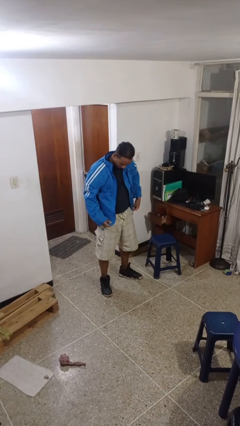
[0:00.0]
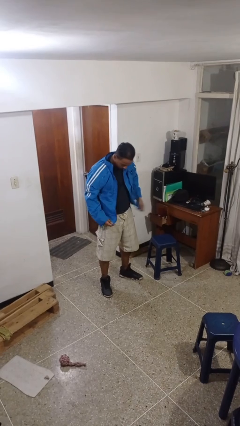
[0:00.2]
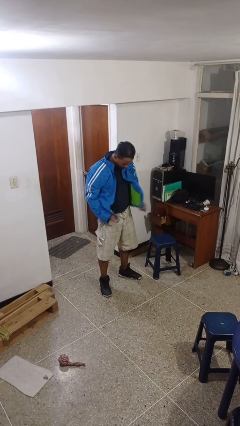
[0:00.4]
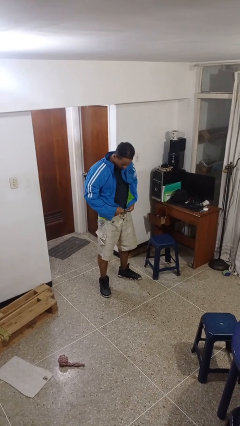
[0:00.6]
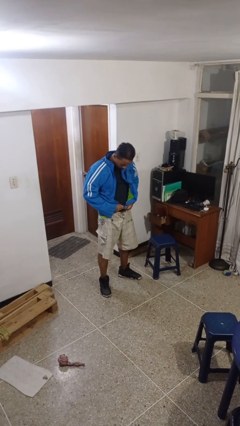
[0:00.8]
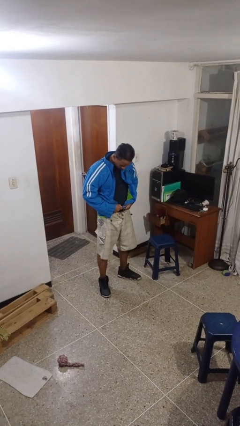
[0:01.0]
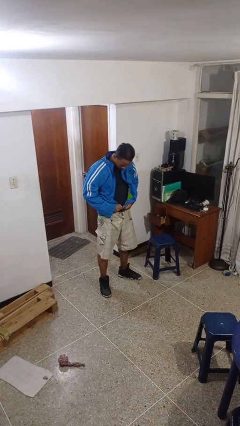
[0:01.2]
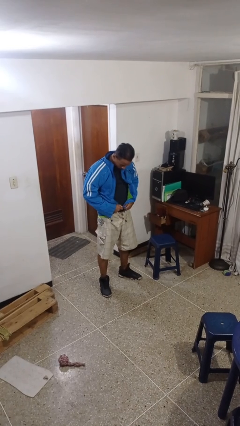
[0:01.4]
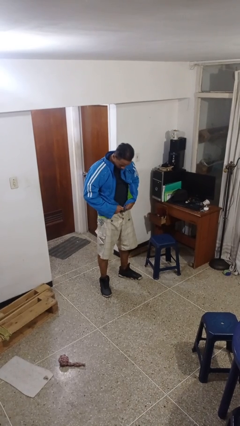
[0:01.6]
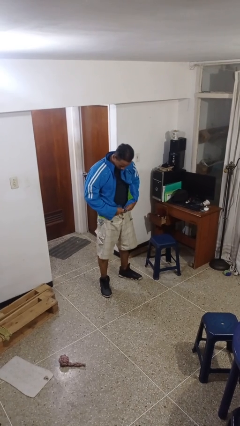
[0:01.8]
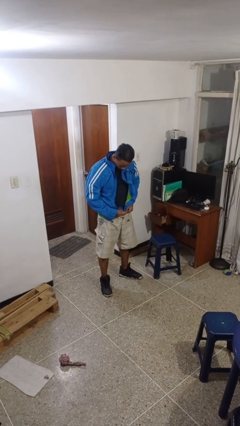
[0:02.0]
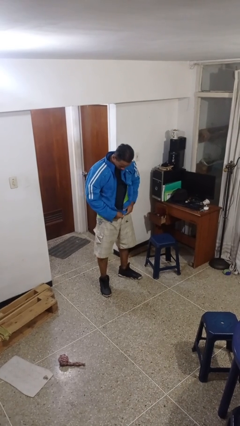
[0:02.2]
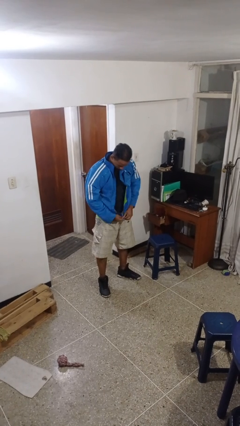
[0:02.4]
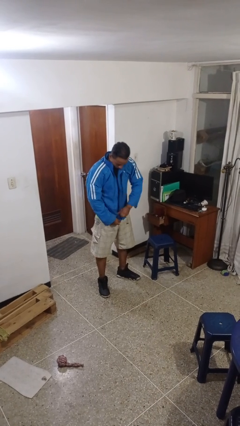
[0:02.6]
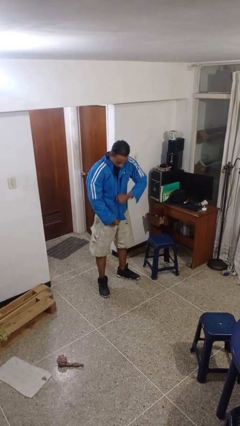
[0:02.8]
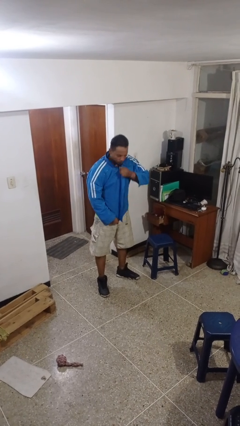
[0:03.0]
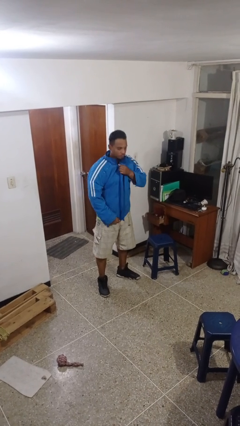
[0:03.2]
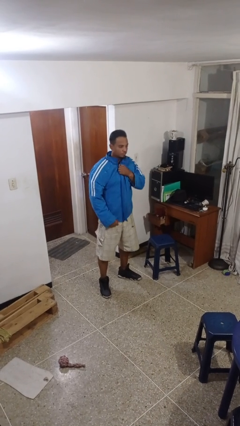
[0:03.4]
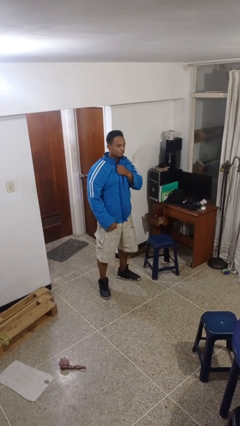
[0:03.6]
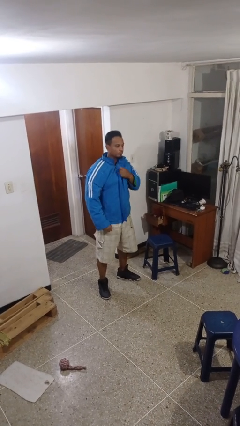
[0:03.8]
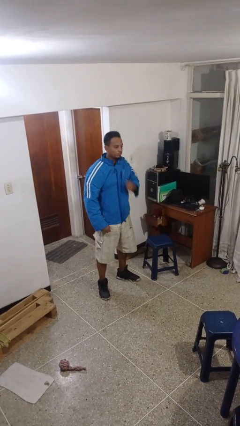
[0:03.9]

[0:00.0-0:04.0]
person zips up jacket

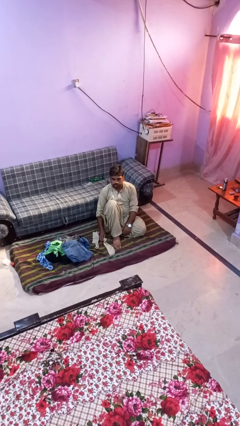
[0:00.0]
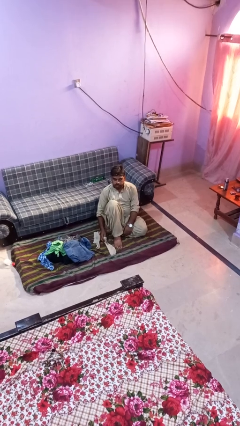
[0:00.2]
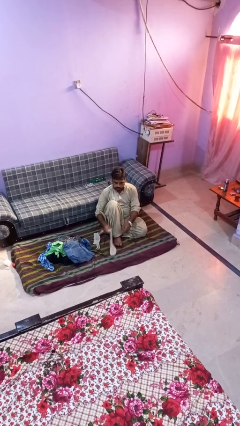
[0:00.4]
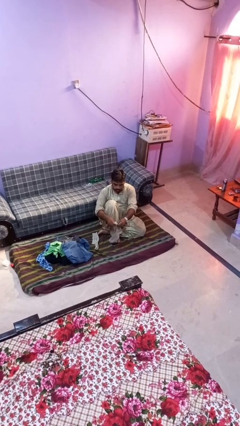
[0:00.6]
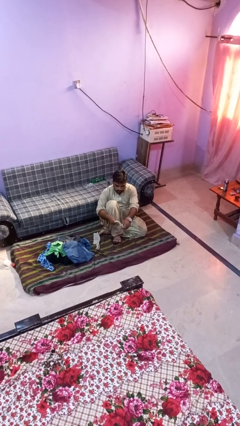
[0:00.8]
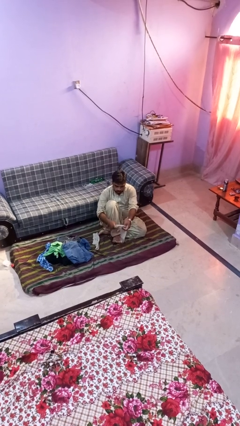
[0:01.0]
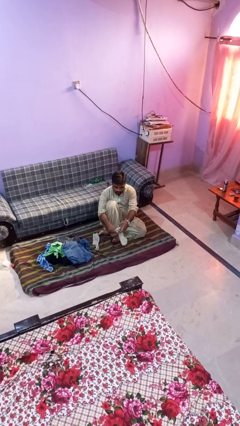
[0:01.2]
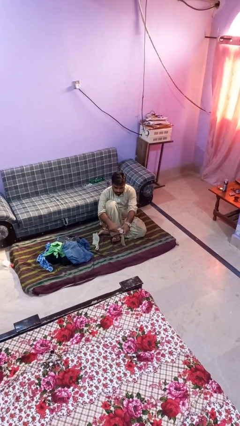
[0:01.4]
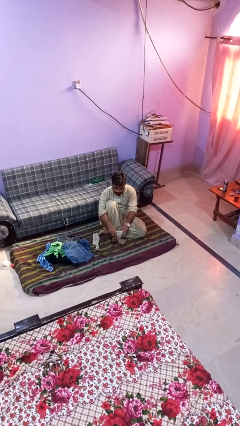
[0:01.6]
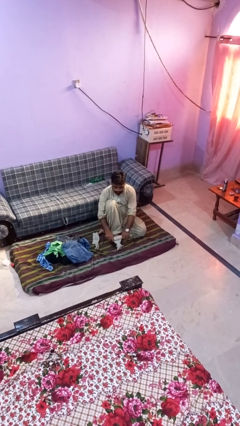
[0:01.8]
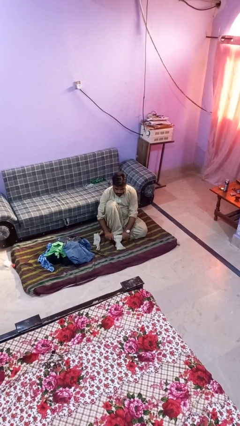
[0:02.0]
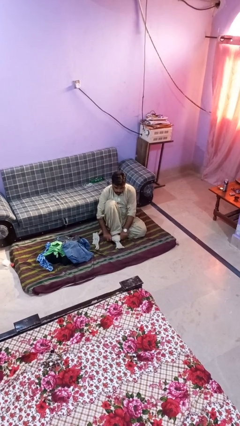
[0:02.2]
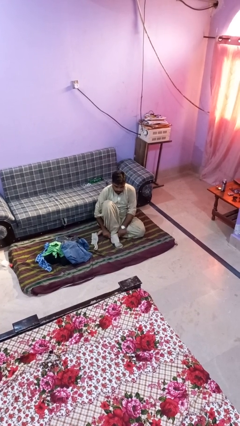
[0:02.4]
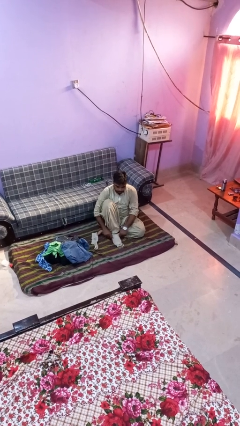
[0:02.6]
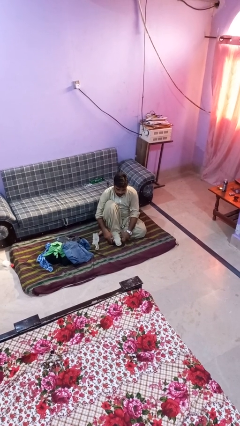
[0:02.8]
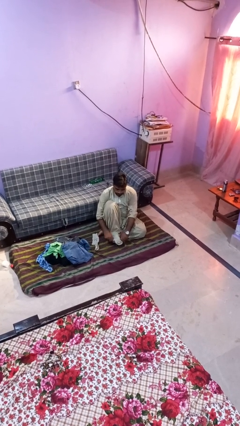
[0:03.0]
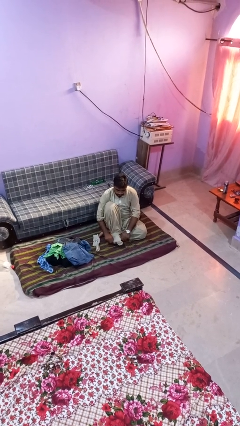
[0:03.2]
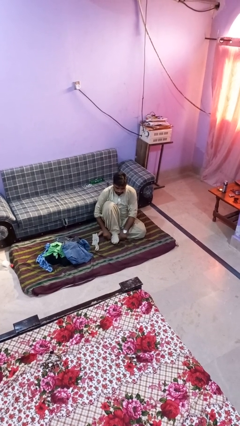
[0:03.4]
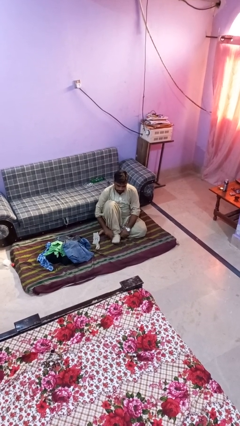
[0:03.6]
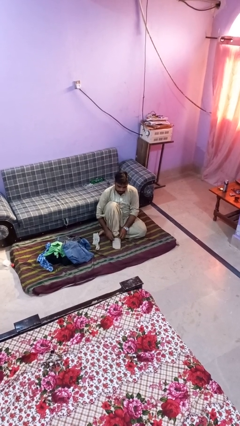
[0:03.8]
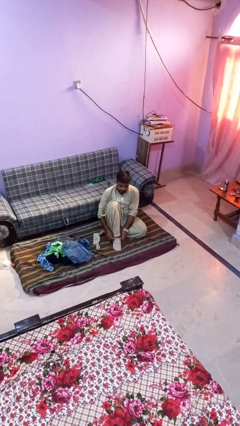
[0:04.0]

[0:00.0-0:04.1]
person puts on socks

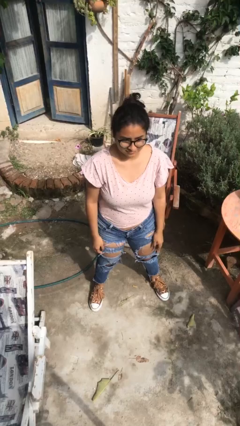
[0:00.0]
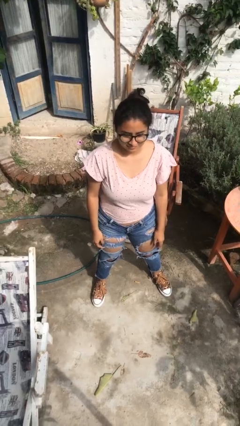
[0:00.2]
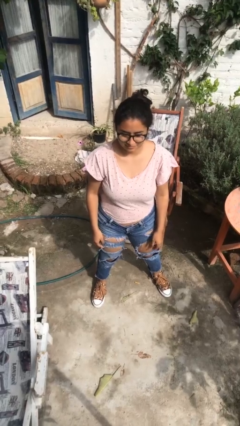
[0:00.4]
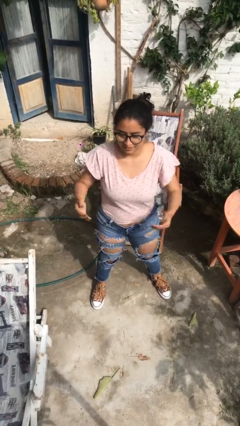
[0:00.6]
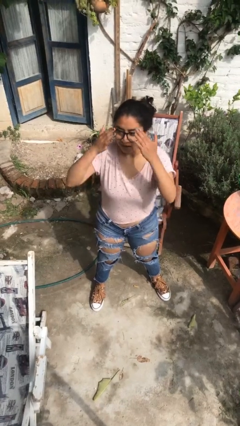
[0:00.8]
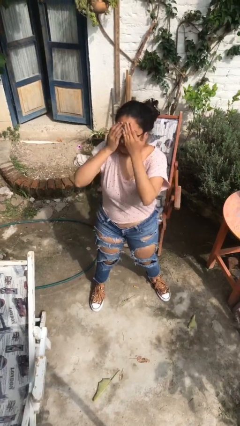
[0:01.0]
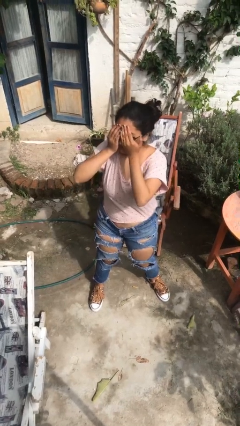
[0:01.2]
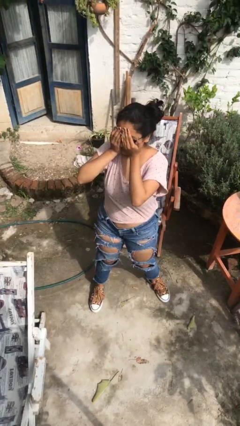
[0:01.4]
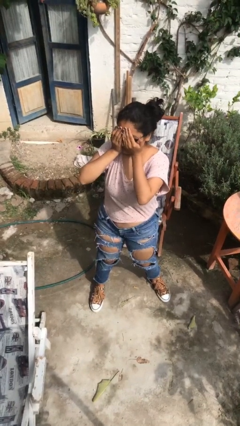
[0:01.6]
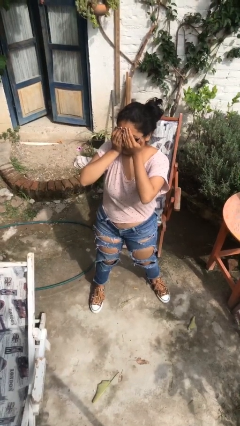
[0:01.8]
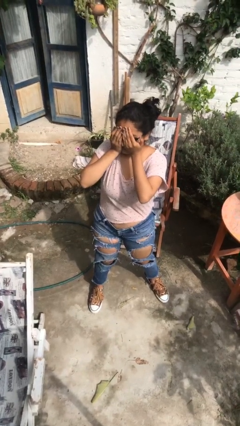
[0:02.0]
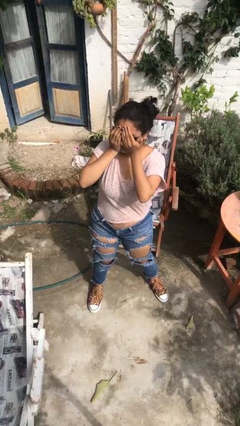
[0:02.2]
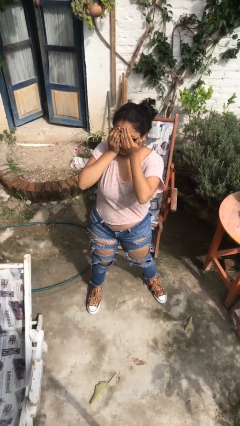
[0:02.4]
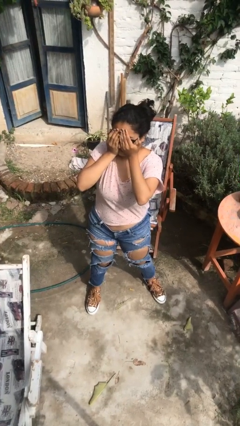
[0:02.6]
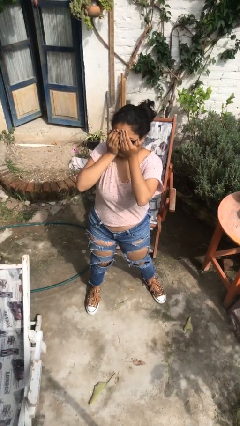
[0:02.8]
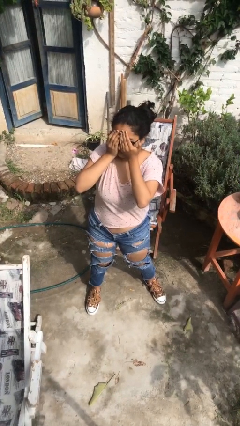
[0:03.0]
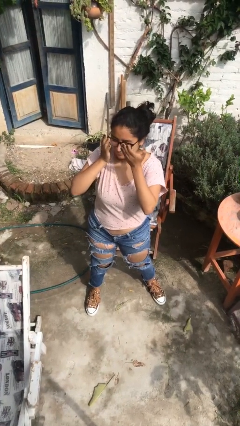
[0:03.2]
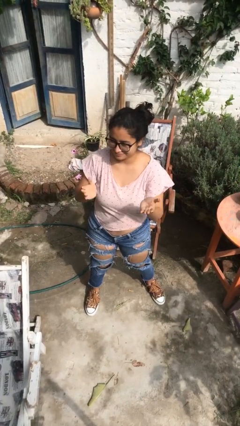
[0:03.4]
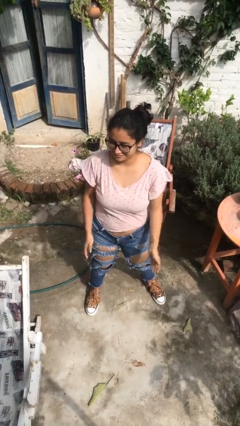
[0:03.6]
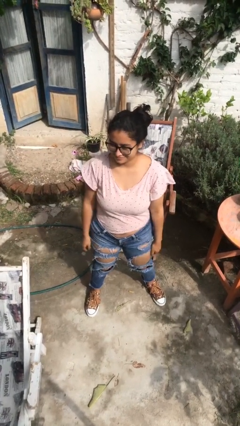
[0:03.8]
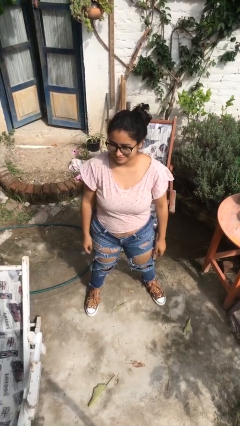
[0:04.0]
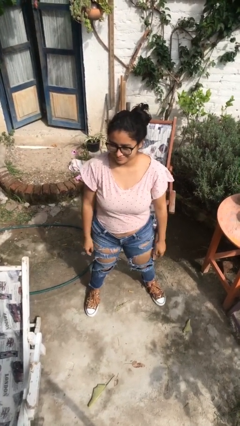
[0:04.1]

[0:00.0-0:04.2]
person covers face with hands

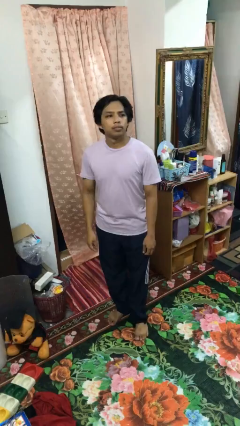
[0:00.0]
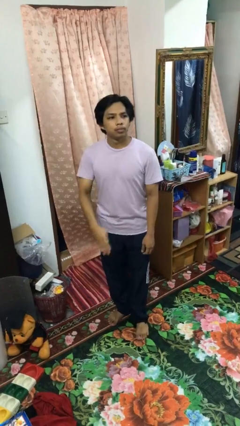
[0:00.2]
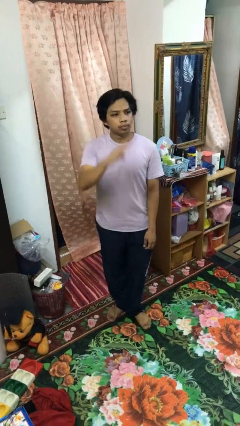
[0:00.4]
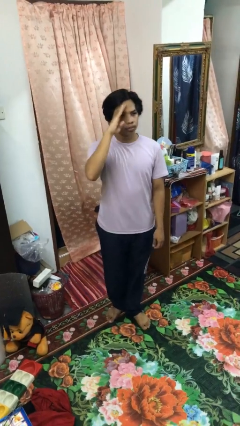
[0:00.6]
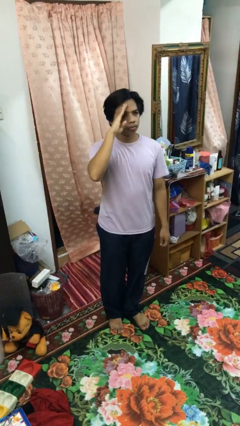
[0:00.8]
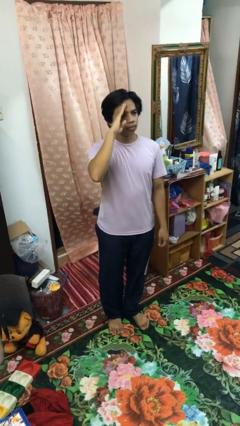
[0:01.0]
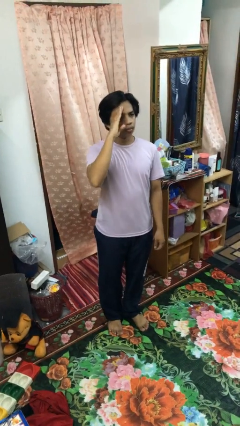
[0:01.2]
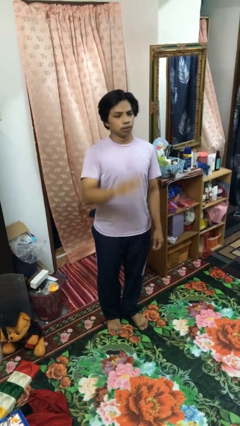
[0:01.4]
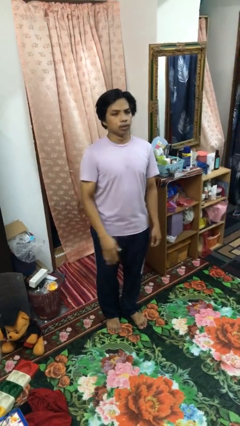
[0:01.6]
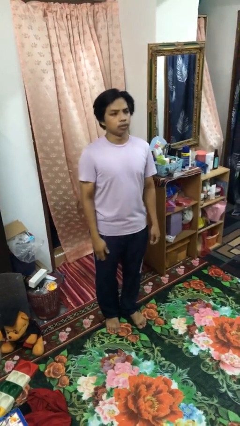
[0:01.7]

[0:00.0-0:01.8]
person salutes

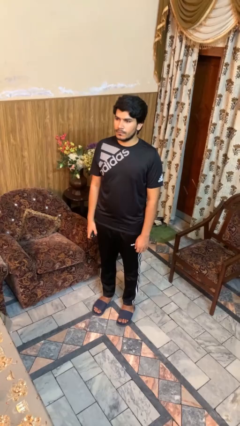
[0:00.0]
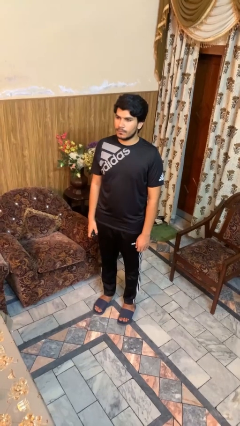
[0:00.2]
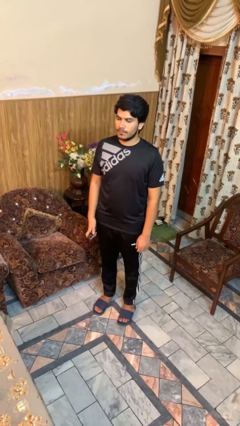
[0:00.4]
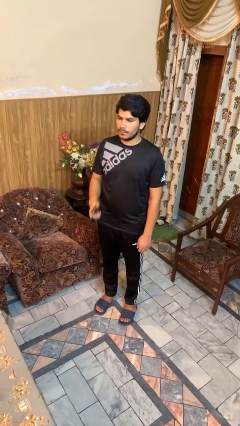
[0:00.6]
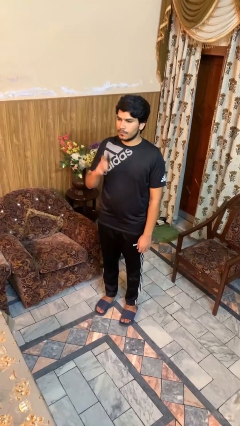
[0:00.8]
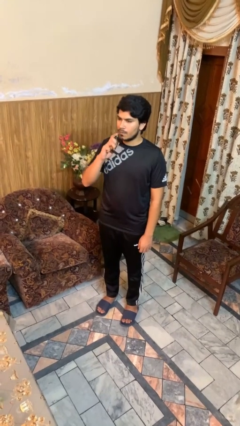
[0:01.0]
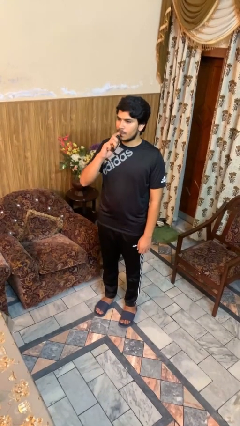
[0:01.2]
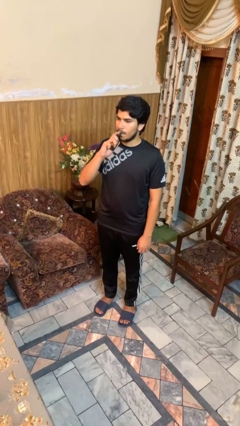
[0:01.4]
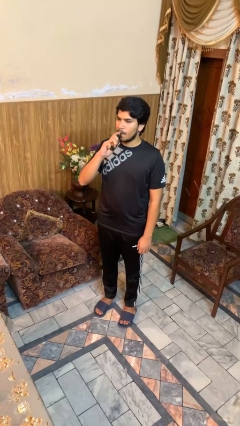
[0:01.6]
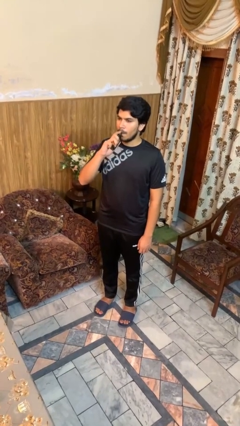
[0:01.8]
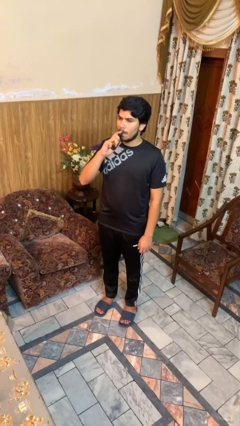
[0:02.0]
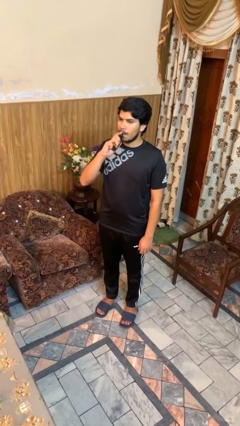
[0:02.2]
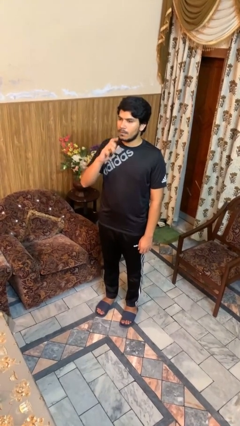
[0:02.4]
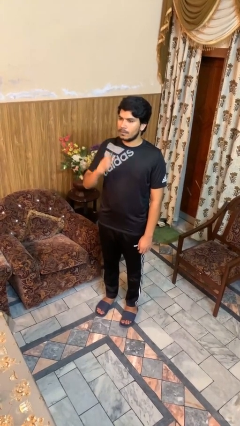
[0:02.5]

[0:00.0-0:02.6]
person vapes

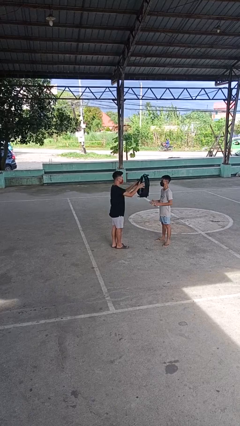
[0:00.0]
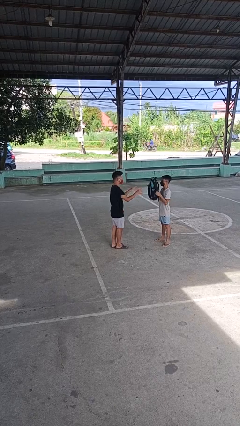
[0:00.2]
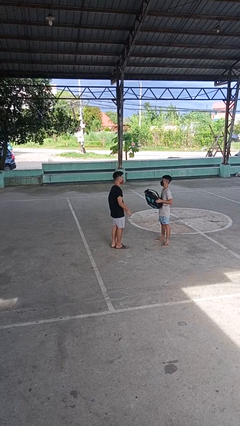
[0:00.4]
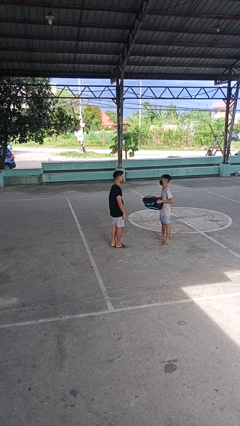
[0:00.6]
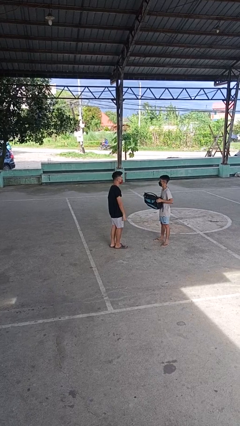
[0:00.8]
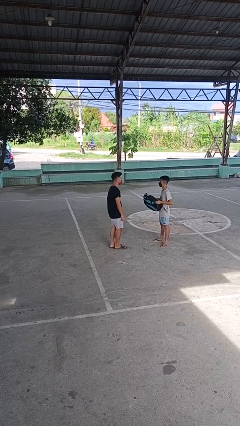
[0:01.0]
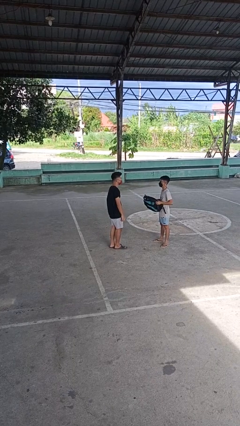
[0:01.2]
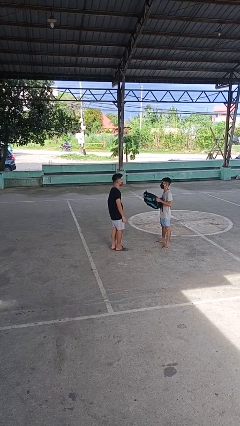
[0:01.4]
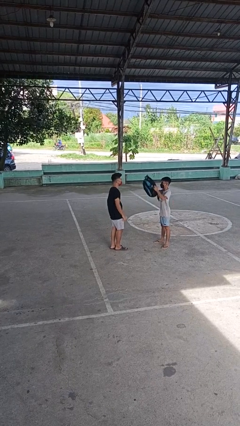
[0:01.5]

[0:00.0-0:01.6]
person throws object to person
